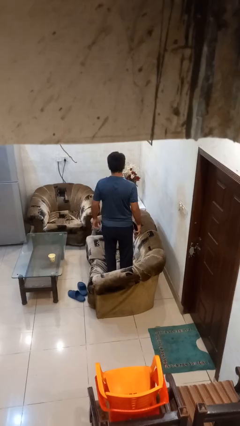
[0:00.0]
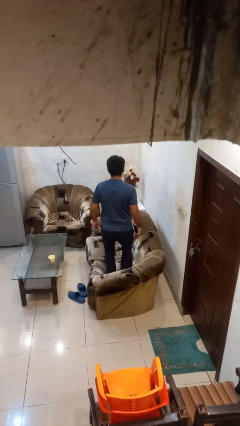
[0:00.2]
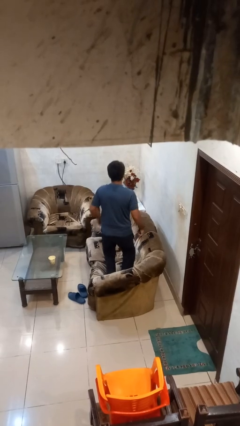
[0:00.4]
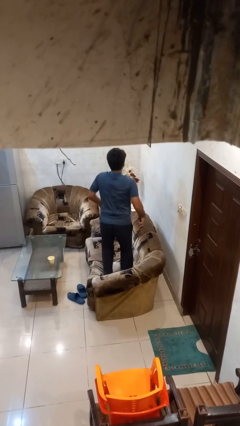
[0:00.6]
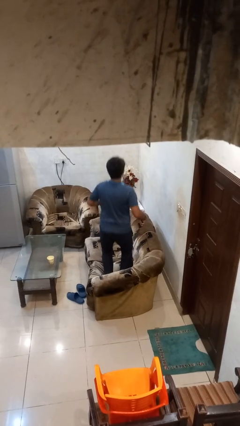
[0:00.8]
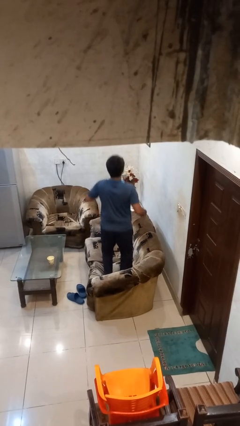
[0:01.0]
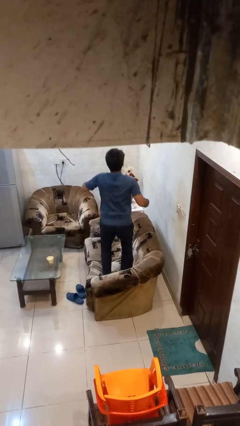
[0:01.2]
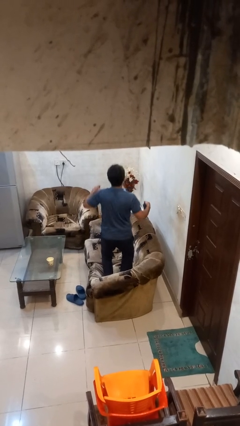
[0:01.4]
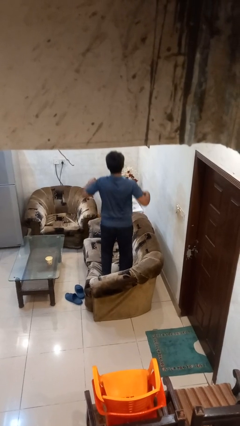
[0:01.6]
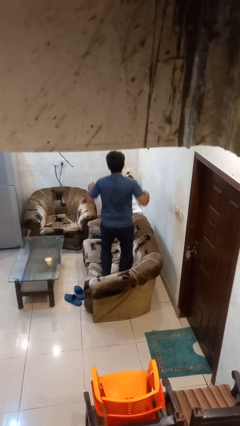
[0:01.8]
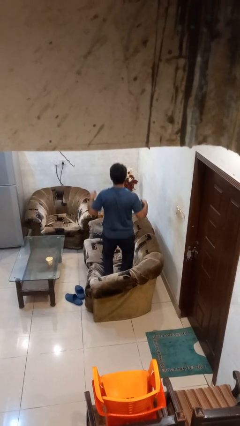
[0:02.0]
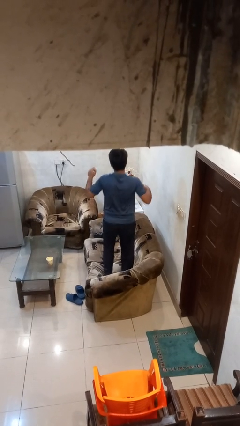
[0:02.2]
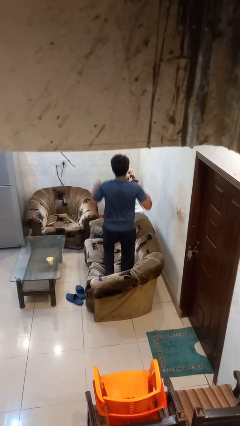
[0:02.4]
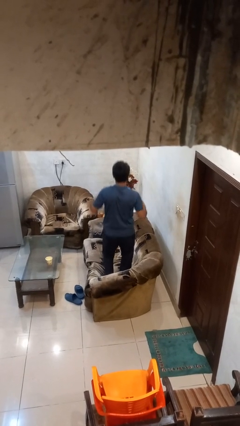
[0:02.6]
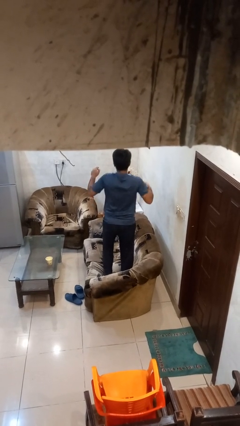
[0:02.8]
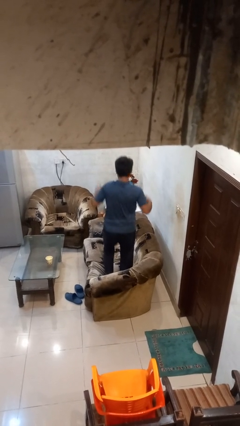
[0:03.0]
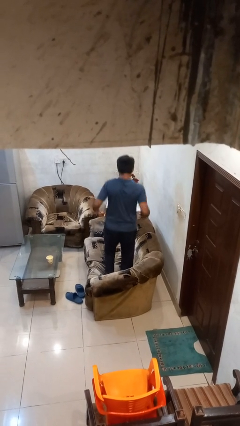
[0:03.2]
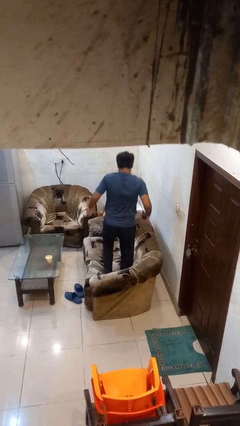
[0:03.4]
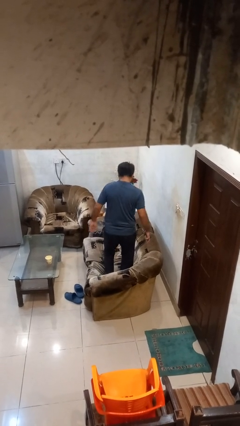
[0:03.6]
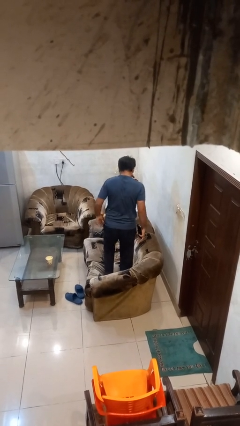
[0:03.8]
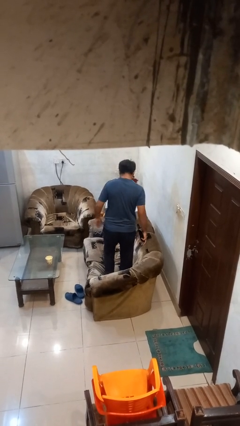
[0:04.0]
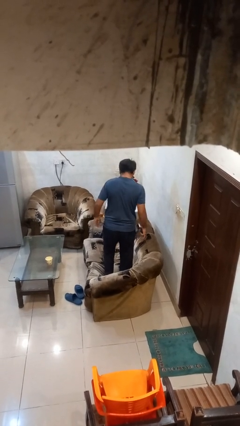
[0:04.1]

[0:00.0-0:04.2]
person jumps on couch

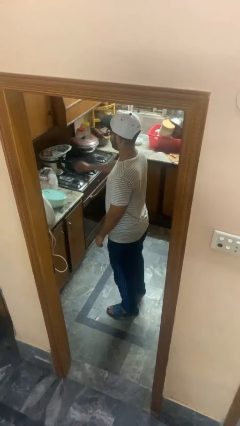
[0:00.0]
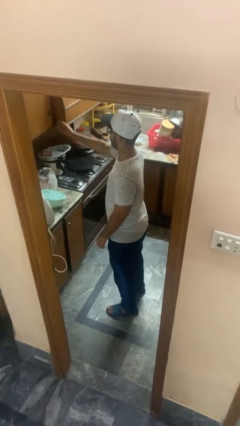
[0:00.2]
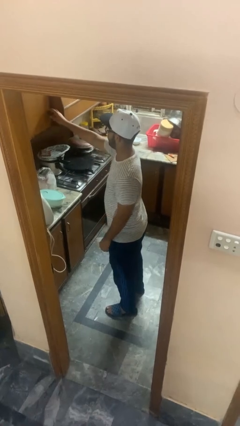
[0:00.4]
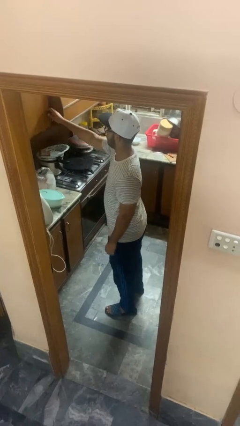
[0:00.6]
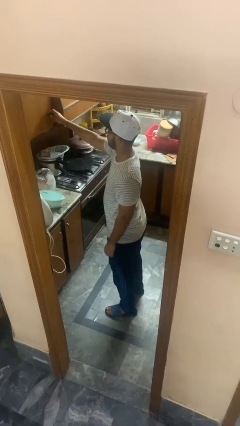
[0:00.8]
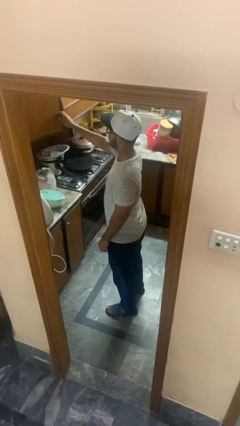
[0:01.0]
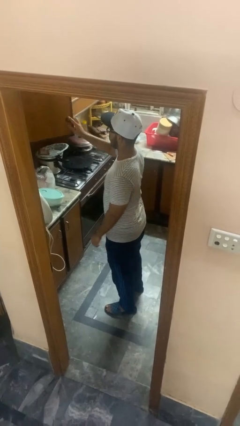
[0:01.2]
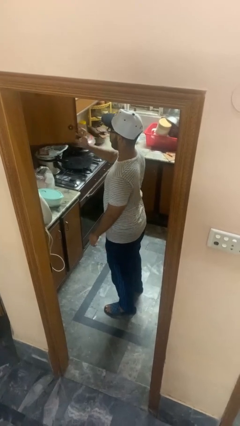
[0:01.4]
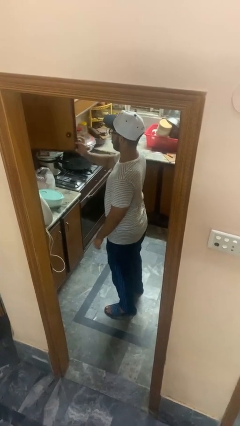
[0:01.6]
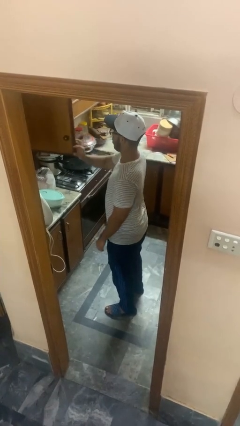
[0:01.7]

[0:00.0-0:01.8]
person opens kitchen drawer

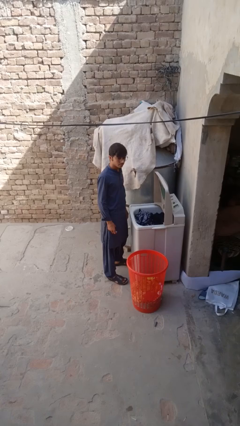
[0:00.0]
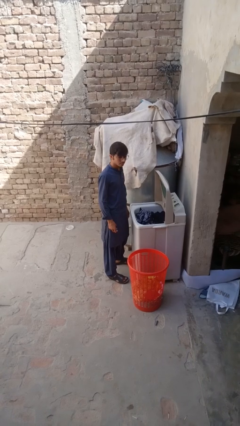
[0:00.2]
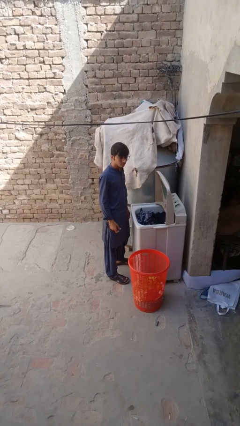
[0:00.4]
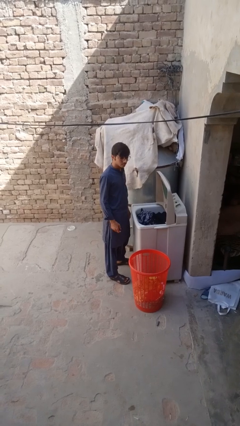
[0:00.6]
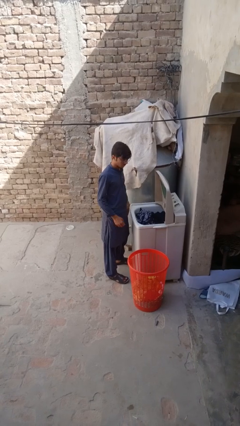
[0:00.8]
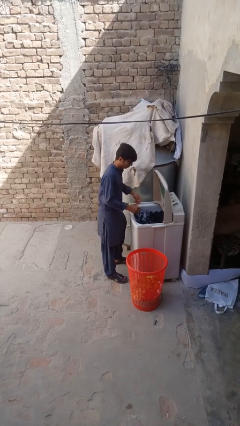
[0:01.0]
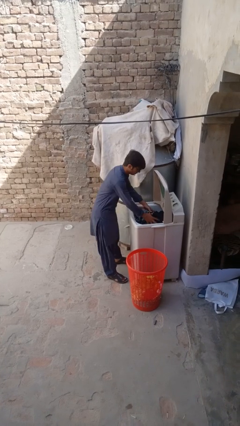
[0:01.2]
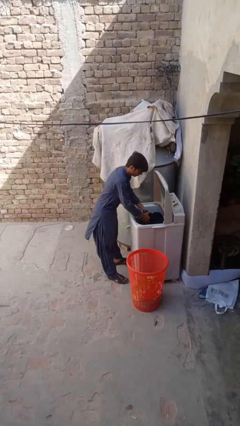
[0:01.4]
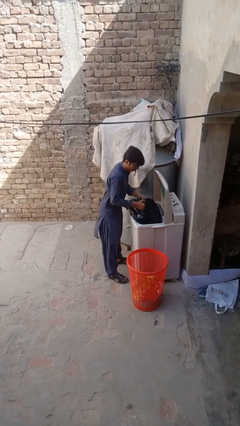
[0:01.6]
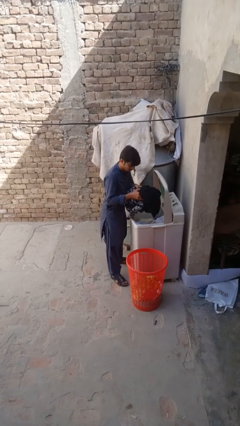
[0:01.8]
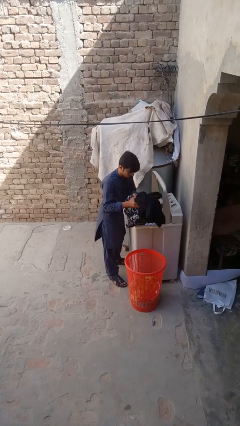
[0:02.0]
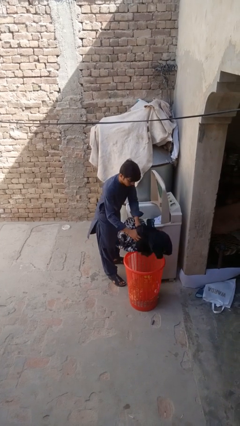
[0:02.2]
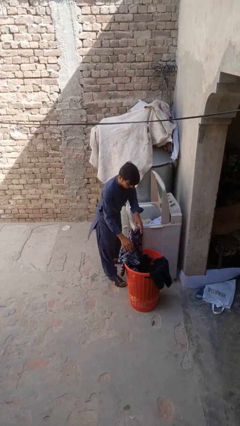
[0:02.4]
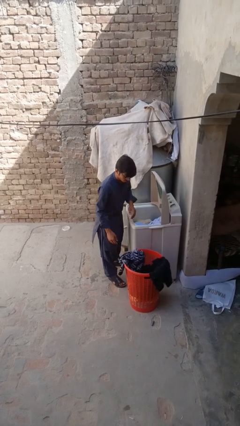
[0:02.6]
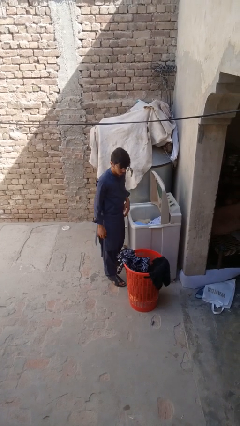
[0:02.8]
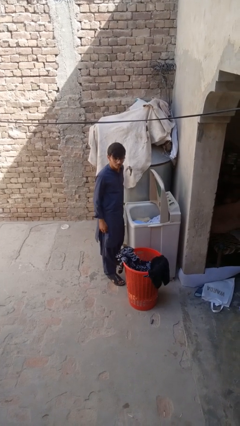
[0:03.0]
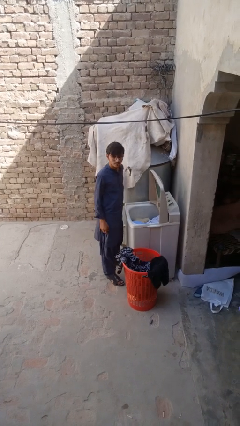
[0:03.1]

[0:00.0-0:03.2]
person unloads clotheswasher

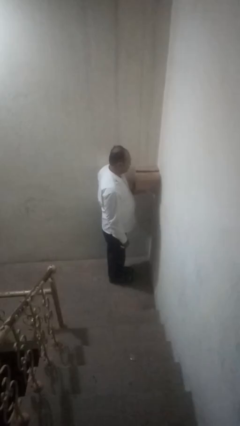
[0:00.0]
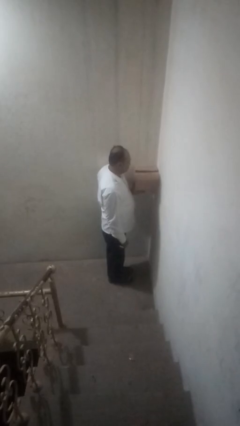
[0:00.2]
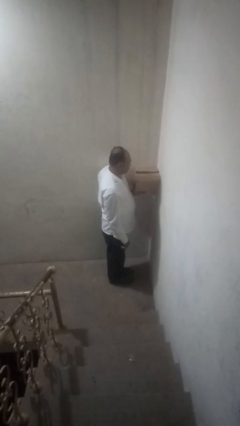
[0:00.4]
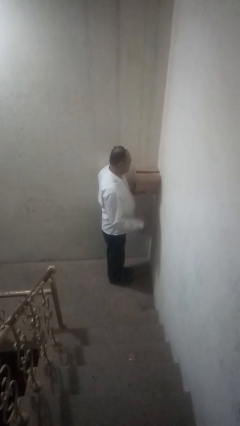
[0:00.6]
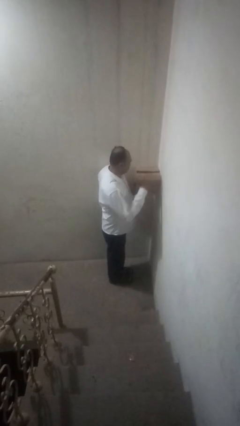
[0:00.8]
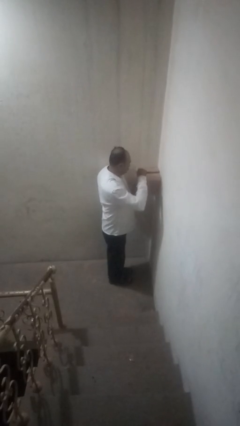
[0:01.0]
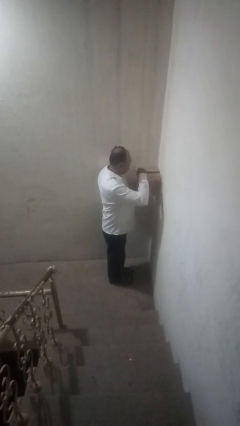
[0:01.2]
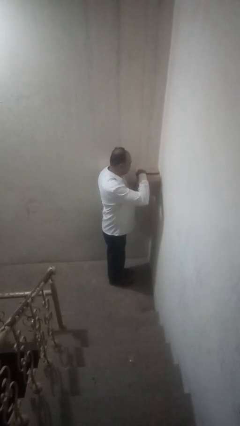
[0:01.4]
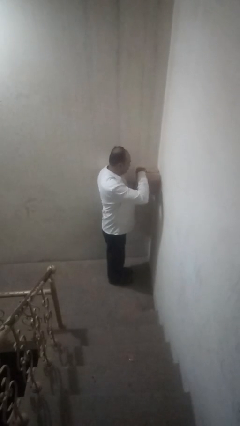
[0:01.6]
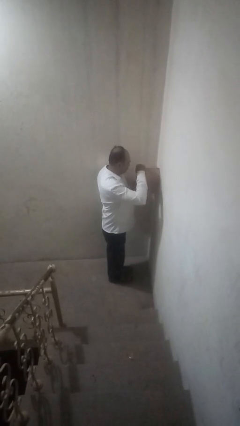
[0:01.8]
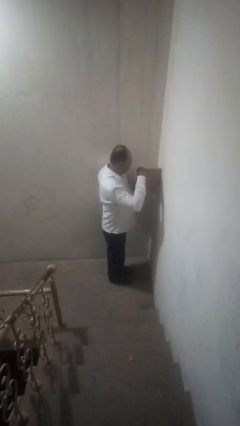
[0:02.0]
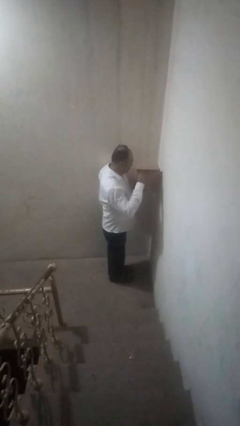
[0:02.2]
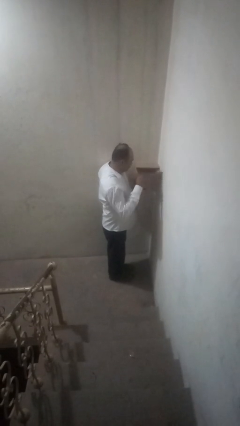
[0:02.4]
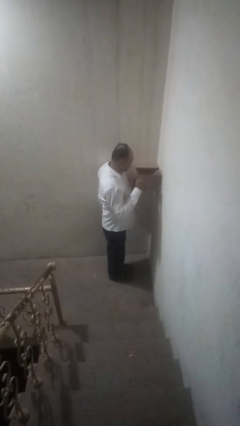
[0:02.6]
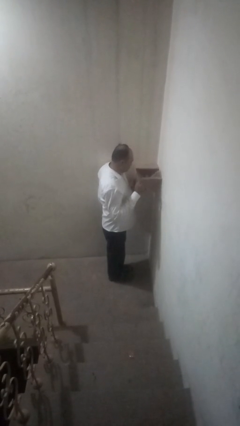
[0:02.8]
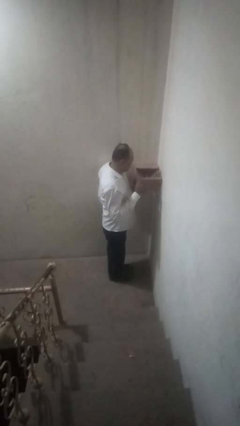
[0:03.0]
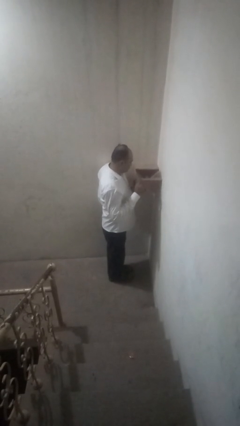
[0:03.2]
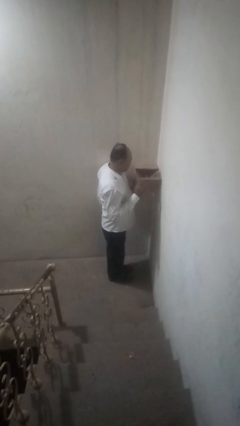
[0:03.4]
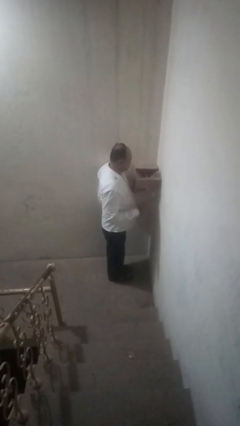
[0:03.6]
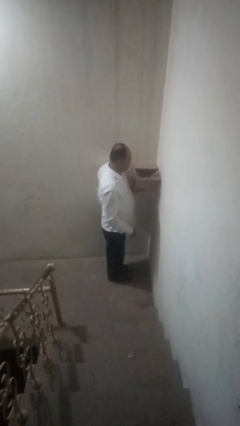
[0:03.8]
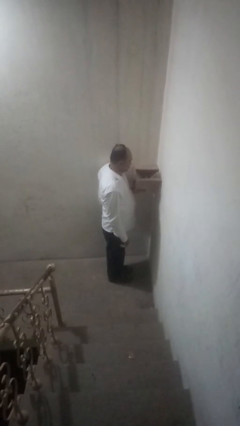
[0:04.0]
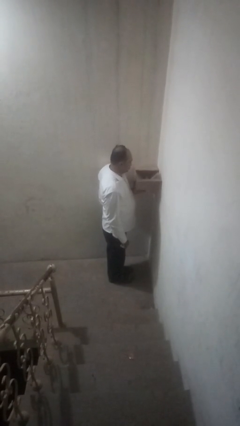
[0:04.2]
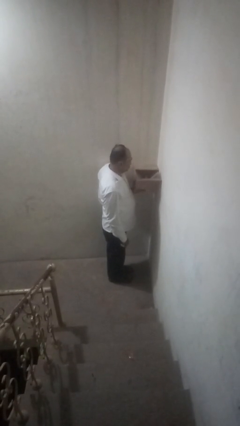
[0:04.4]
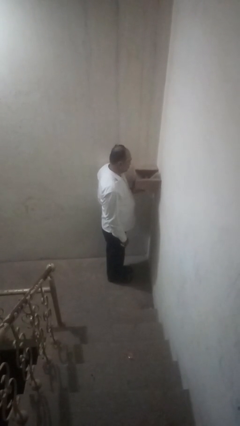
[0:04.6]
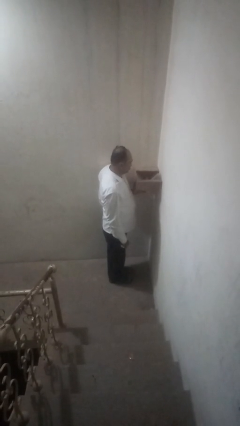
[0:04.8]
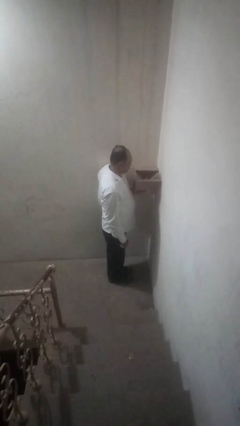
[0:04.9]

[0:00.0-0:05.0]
person opens mailbox

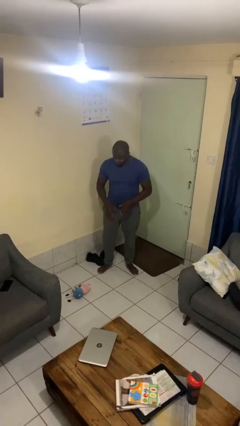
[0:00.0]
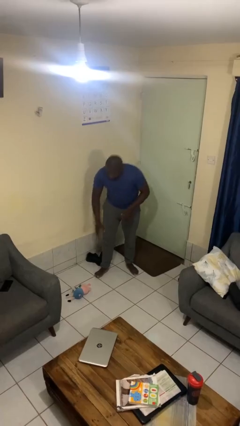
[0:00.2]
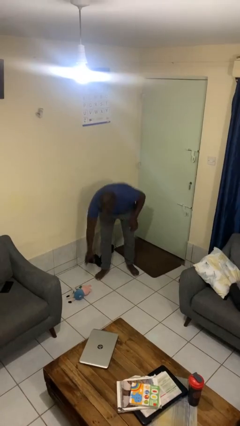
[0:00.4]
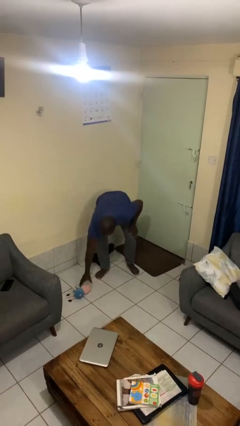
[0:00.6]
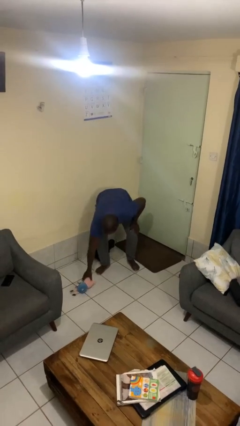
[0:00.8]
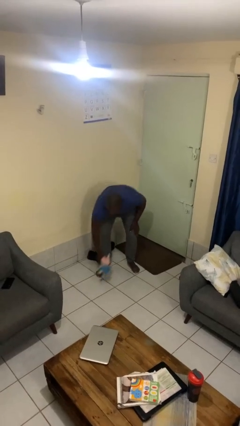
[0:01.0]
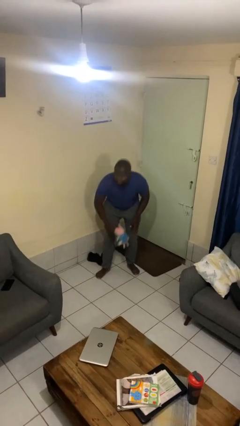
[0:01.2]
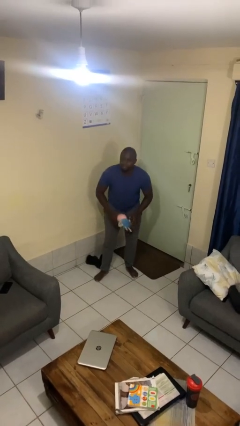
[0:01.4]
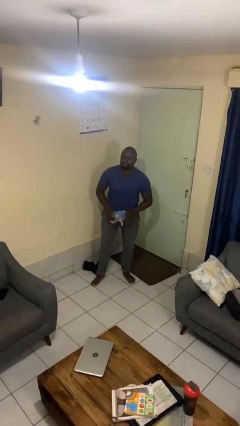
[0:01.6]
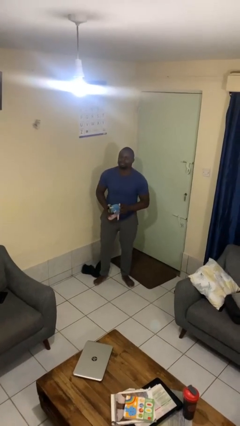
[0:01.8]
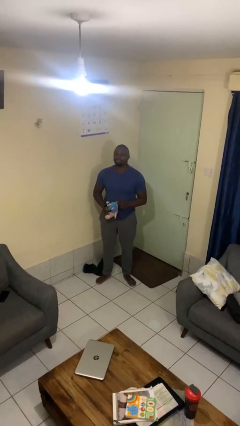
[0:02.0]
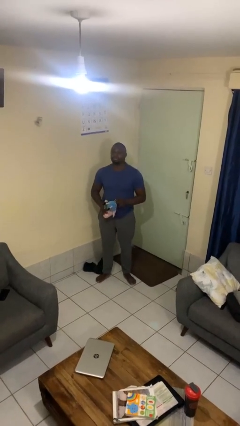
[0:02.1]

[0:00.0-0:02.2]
person picks up object from floor

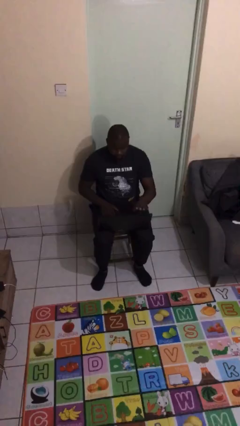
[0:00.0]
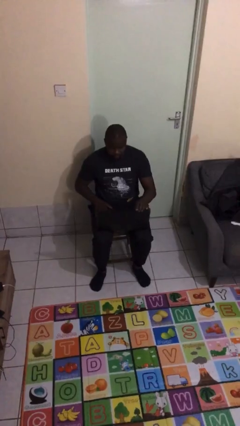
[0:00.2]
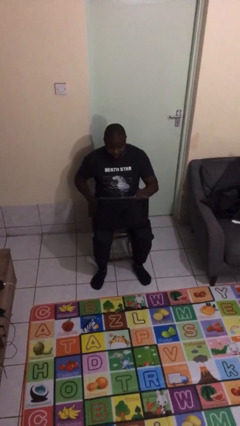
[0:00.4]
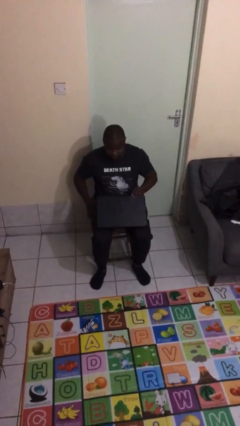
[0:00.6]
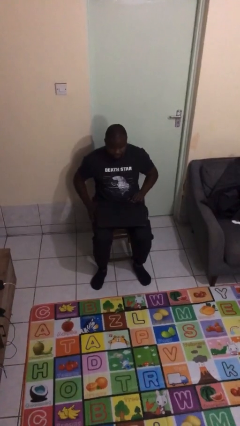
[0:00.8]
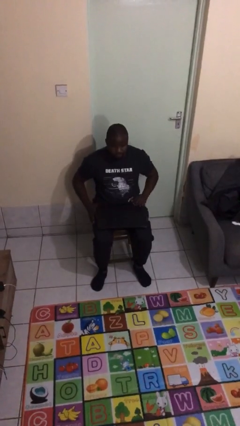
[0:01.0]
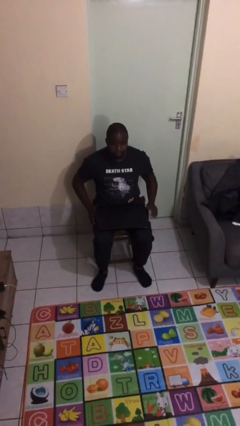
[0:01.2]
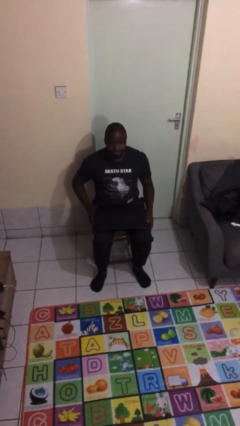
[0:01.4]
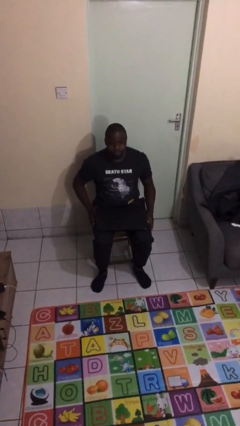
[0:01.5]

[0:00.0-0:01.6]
person closes laptop
